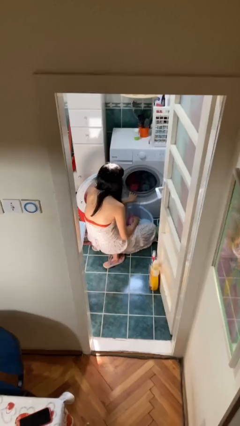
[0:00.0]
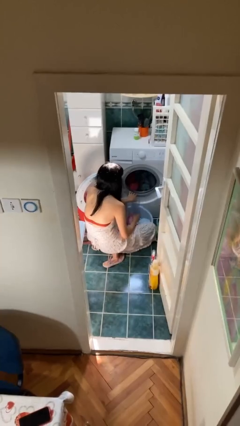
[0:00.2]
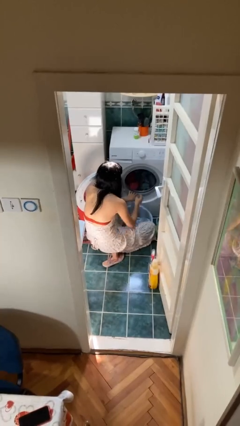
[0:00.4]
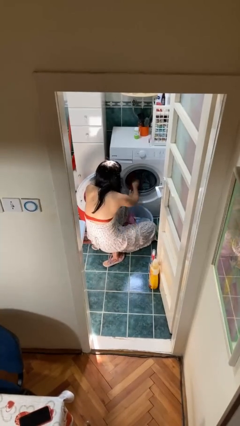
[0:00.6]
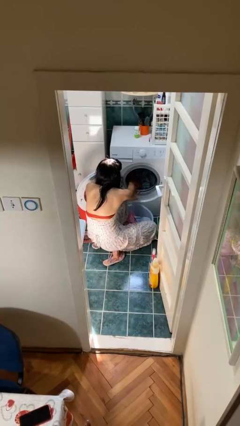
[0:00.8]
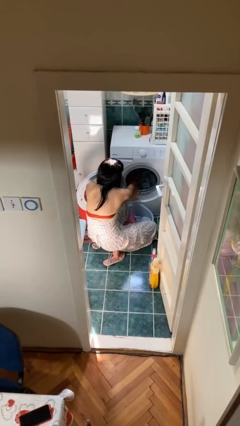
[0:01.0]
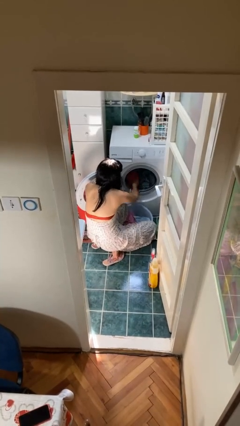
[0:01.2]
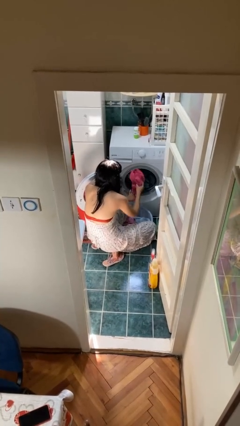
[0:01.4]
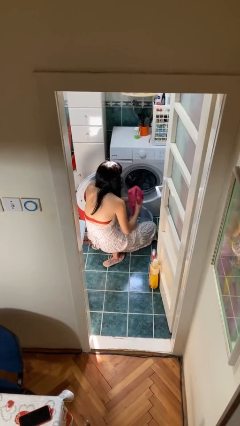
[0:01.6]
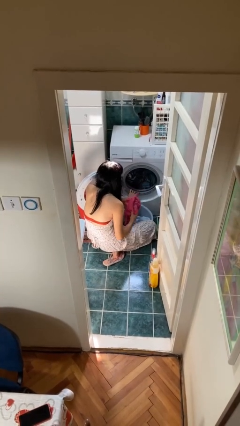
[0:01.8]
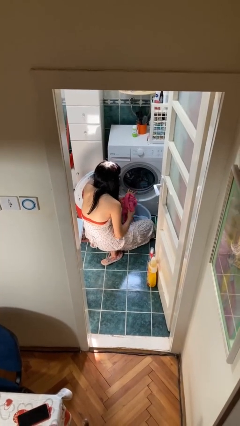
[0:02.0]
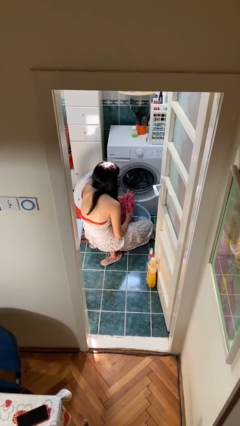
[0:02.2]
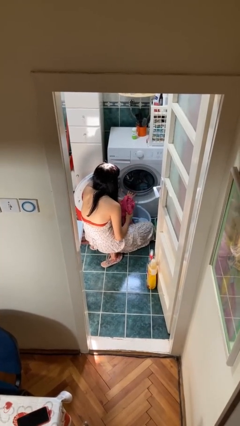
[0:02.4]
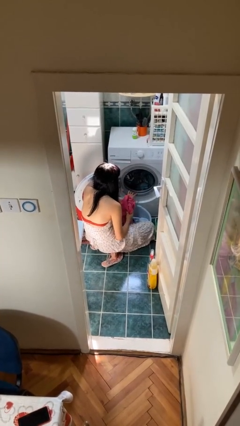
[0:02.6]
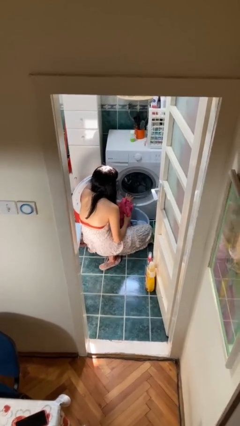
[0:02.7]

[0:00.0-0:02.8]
person loads clotheswasher

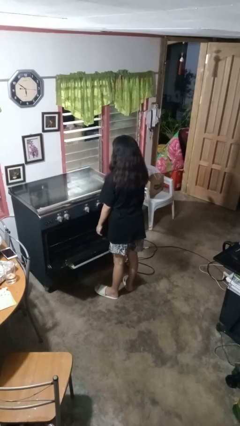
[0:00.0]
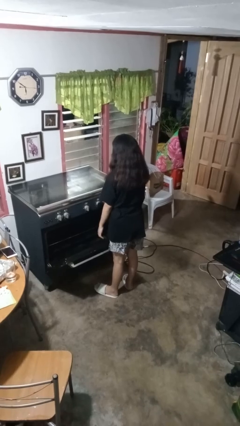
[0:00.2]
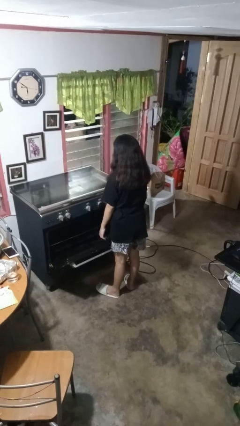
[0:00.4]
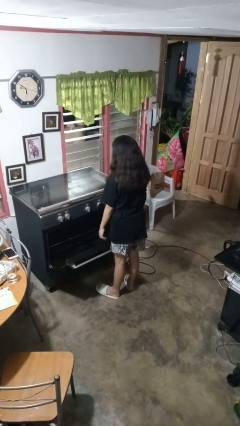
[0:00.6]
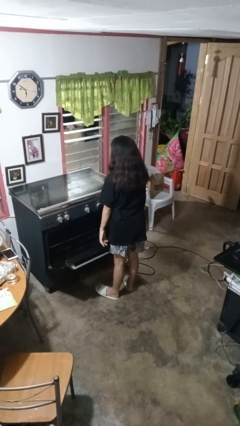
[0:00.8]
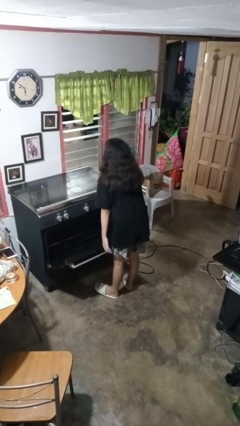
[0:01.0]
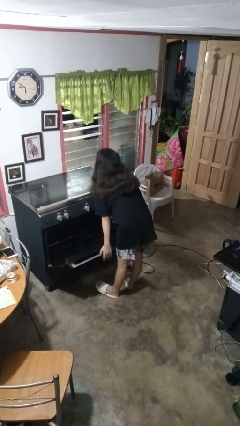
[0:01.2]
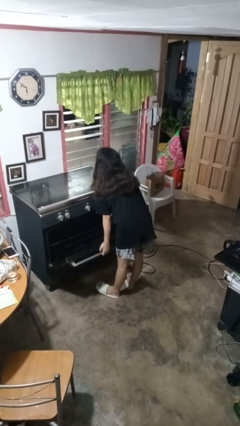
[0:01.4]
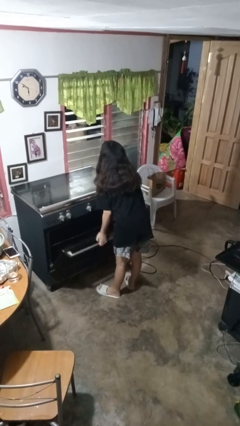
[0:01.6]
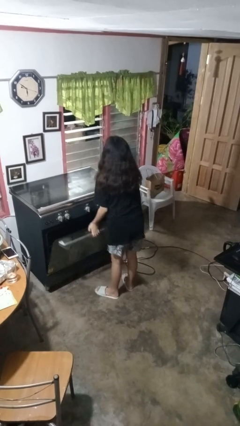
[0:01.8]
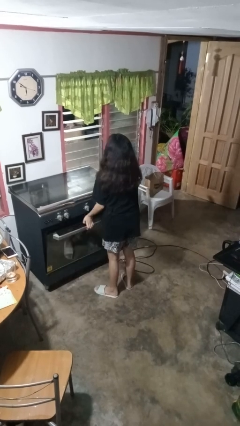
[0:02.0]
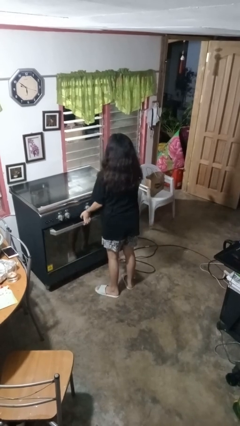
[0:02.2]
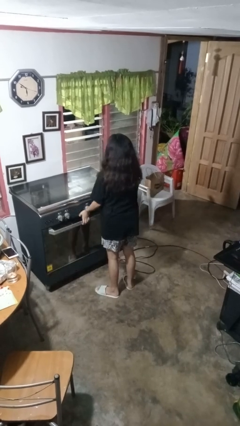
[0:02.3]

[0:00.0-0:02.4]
person closes oven door

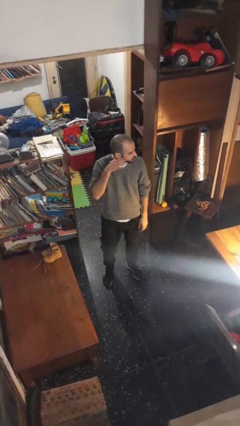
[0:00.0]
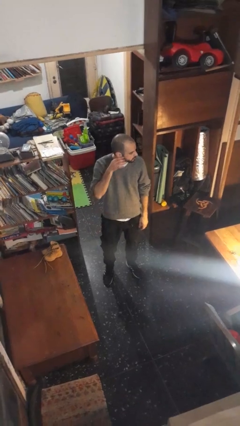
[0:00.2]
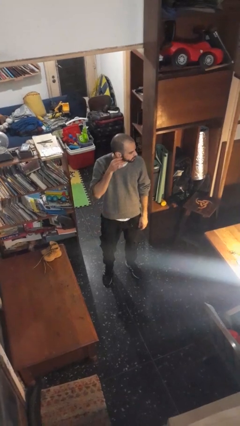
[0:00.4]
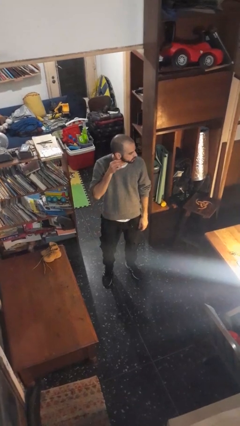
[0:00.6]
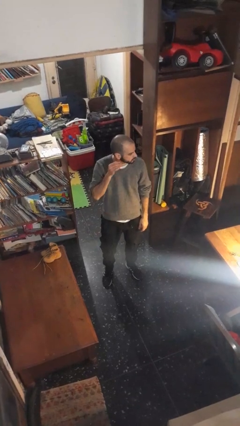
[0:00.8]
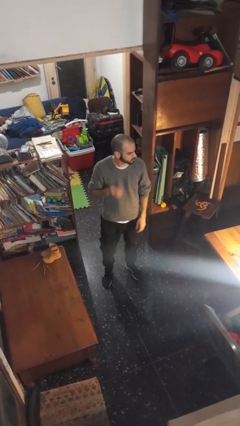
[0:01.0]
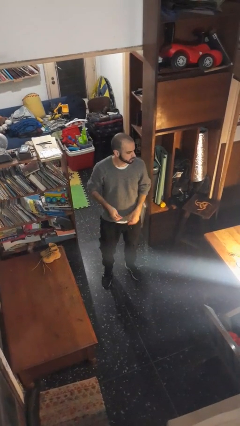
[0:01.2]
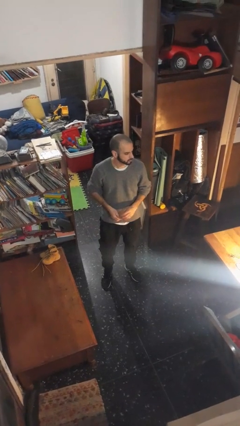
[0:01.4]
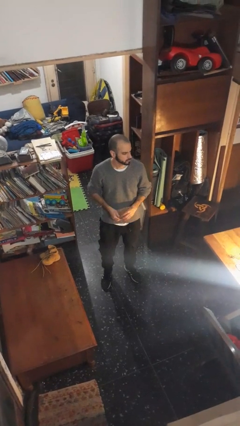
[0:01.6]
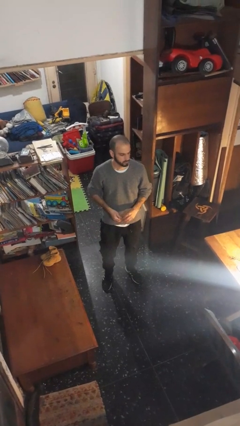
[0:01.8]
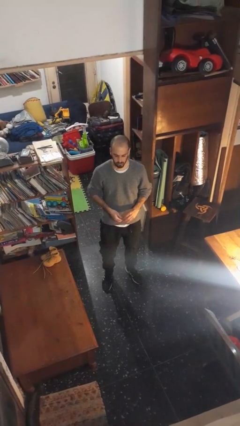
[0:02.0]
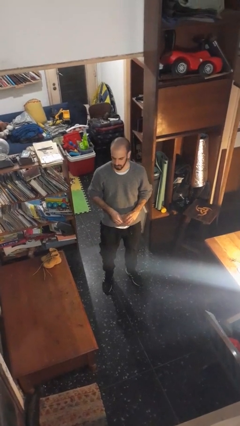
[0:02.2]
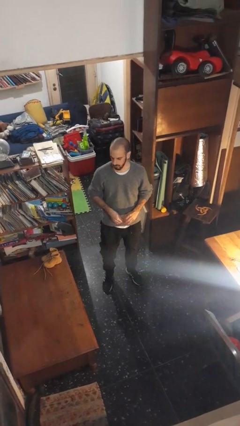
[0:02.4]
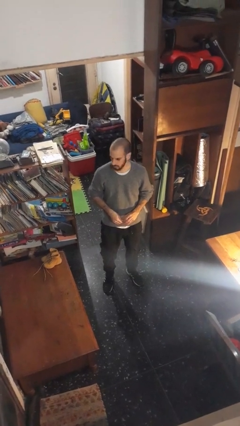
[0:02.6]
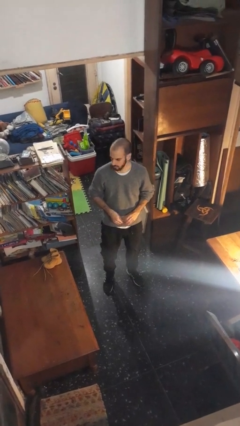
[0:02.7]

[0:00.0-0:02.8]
person takes off earrings

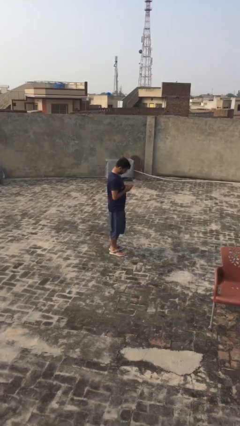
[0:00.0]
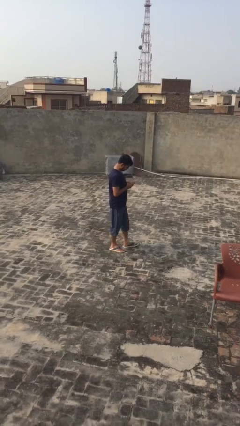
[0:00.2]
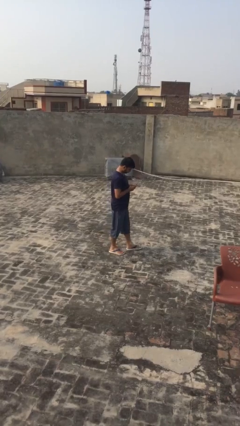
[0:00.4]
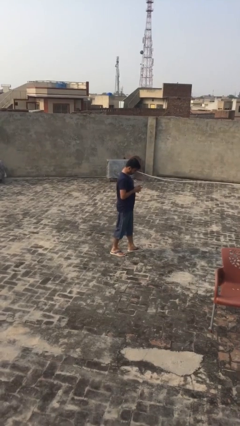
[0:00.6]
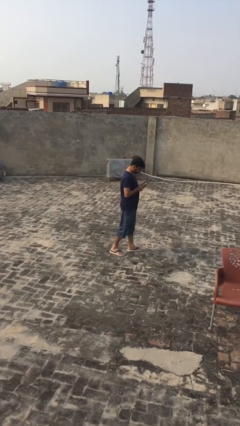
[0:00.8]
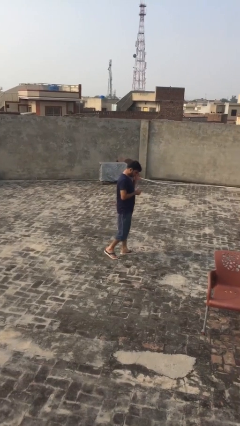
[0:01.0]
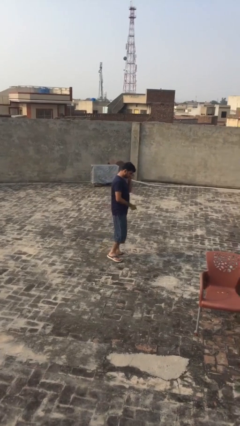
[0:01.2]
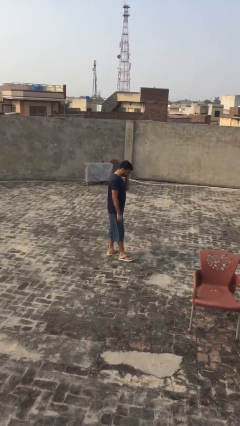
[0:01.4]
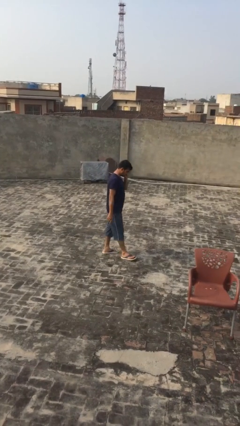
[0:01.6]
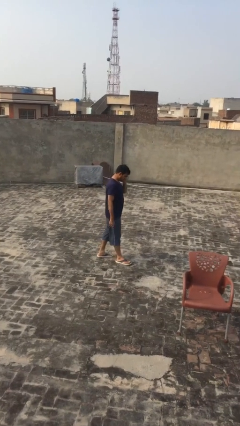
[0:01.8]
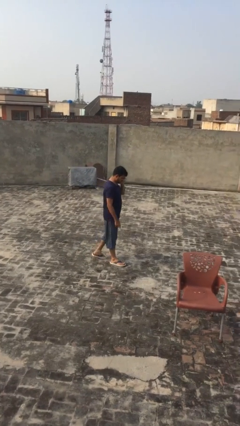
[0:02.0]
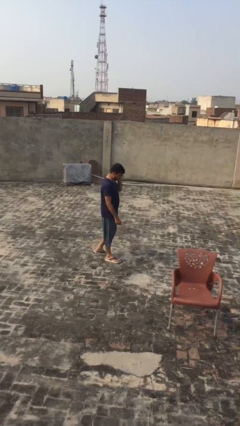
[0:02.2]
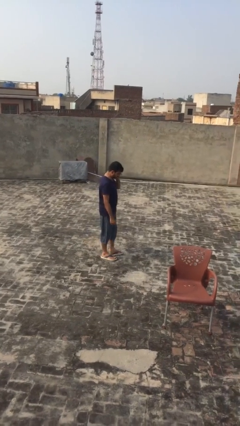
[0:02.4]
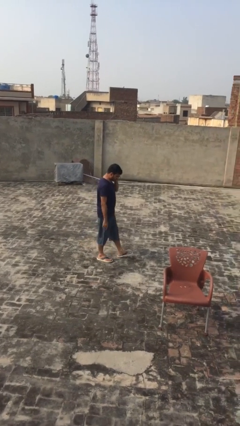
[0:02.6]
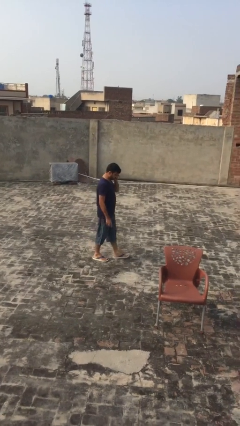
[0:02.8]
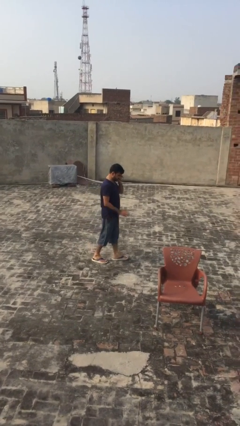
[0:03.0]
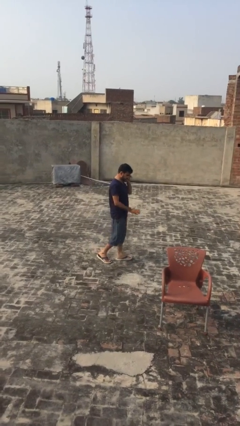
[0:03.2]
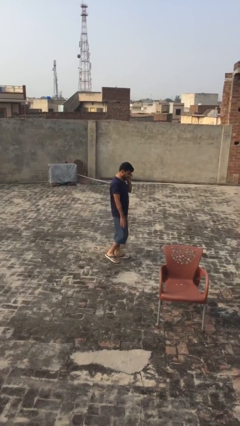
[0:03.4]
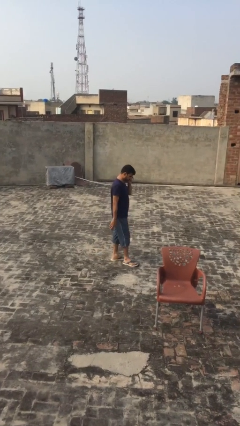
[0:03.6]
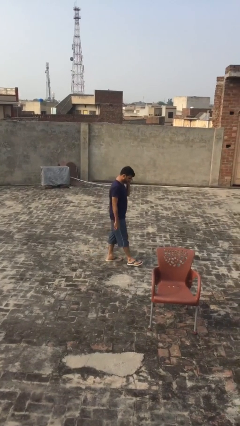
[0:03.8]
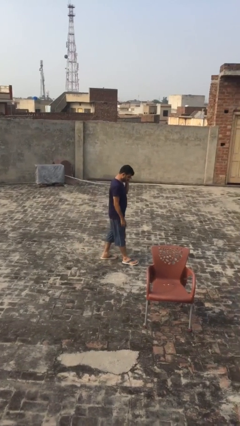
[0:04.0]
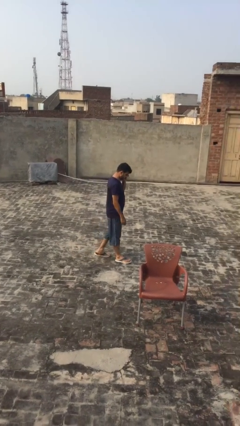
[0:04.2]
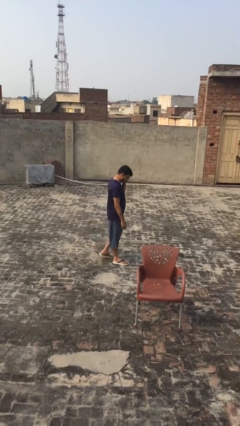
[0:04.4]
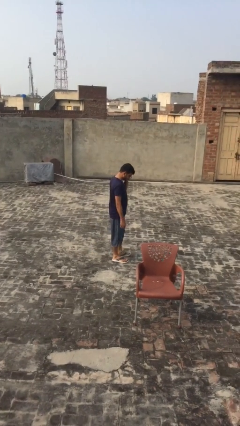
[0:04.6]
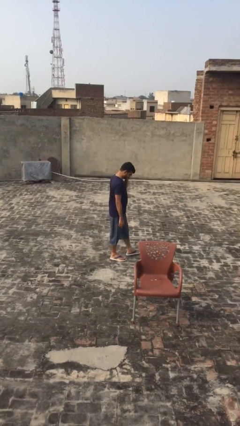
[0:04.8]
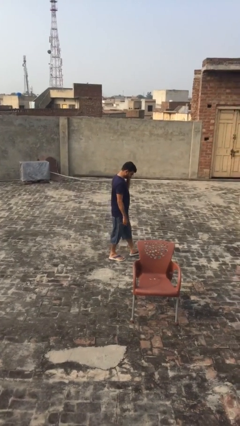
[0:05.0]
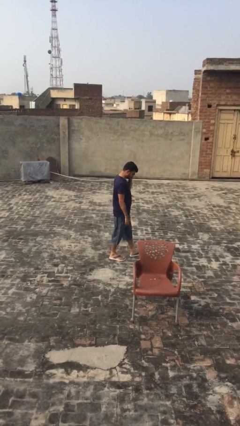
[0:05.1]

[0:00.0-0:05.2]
person talks on phone

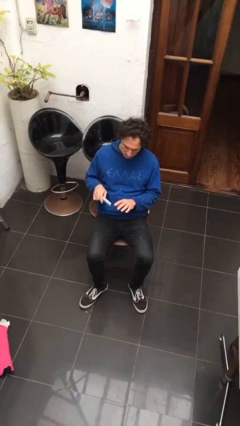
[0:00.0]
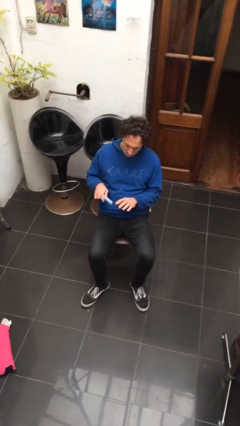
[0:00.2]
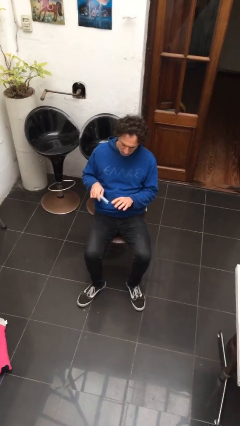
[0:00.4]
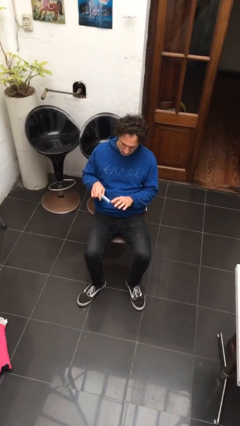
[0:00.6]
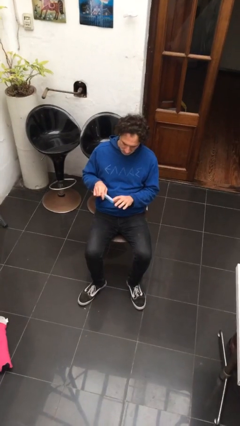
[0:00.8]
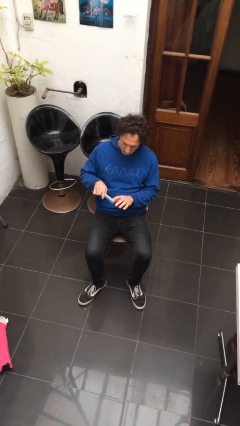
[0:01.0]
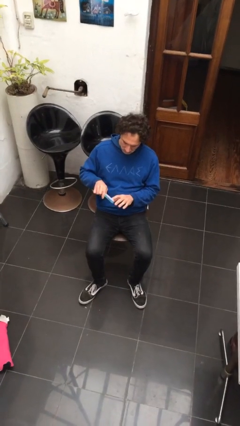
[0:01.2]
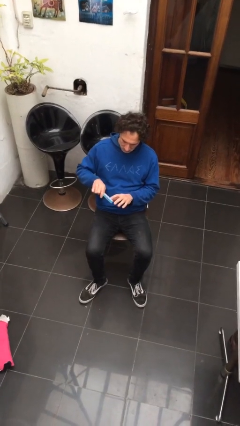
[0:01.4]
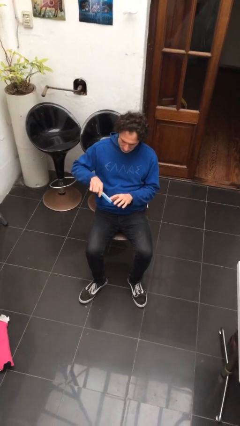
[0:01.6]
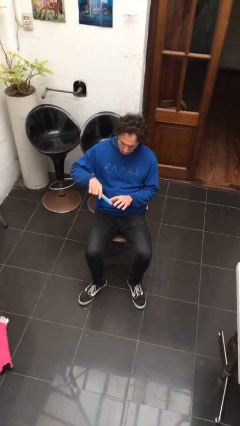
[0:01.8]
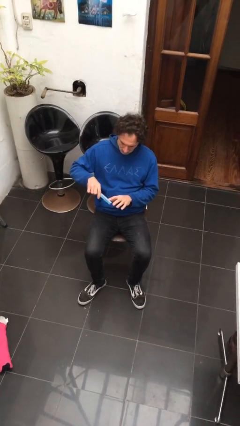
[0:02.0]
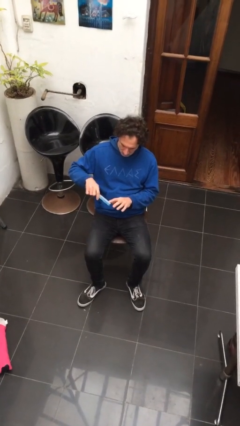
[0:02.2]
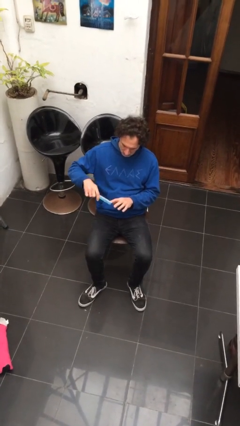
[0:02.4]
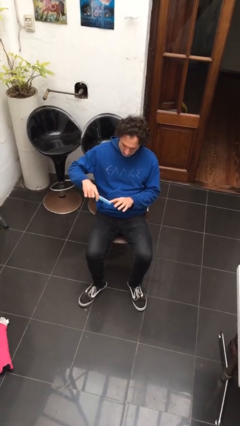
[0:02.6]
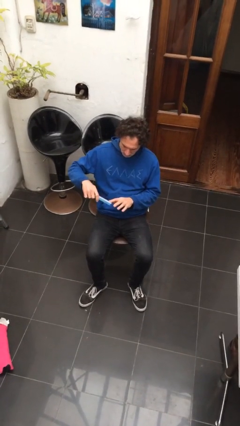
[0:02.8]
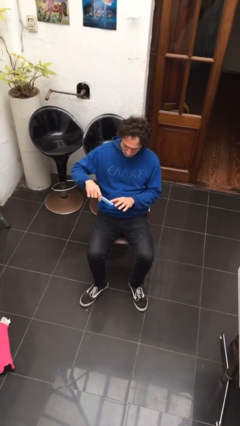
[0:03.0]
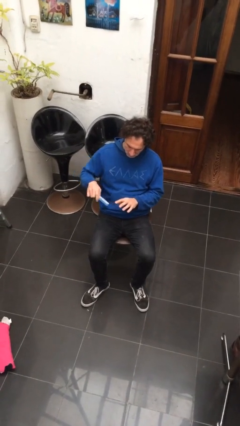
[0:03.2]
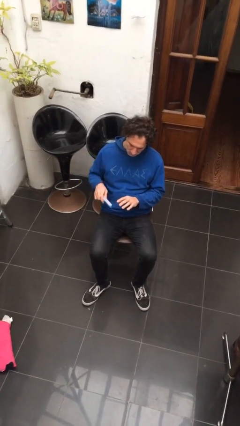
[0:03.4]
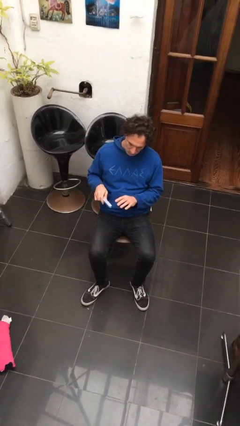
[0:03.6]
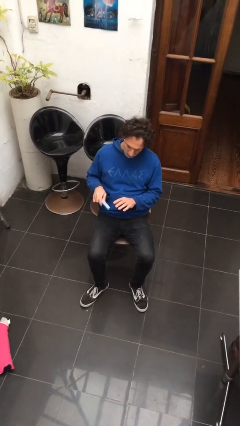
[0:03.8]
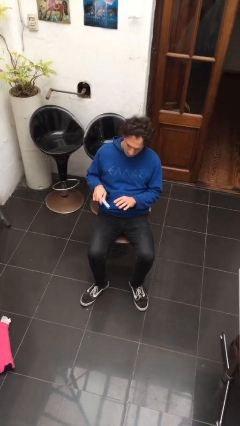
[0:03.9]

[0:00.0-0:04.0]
person files fingernails
